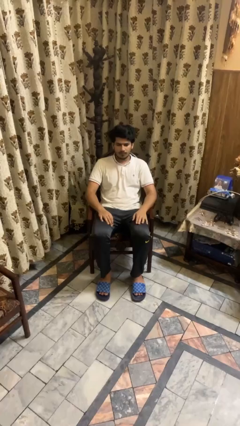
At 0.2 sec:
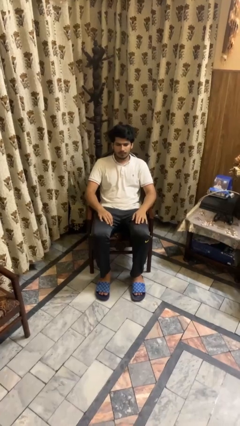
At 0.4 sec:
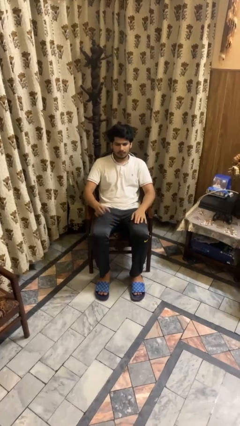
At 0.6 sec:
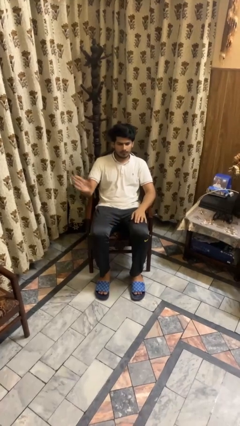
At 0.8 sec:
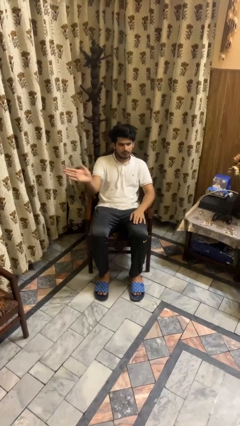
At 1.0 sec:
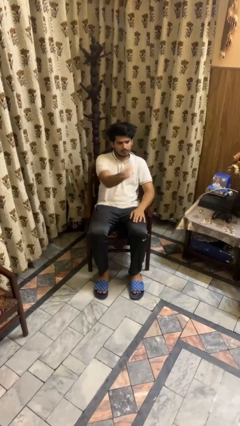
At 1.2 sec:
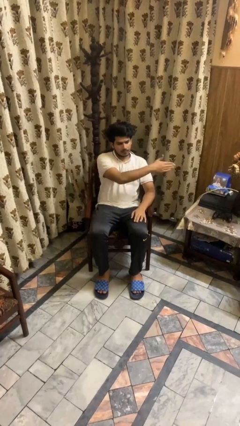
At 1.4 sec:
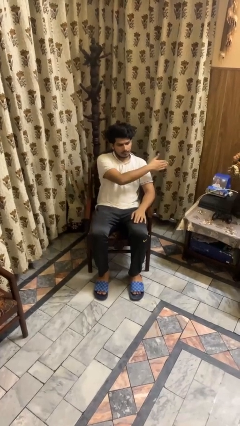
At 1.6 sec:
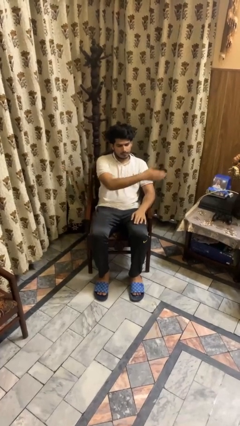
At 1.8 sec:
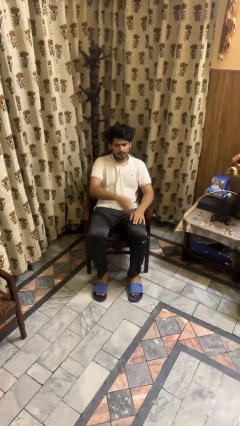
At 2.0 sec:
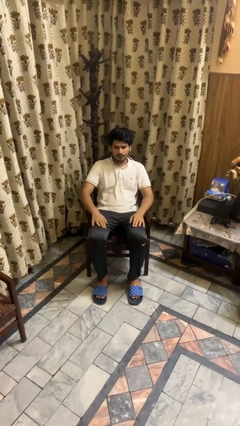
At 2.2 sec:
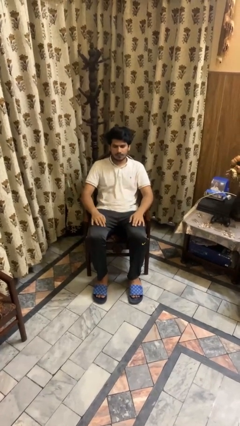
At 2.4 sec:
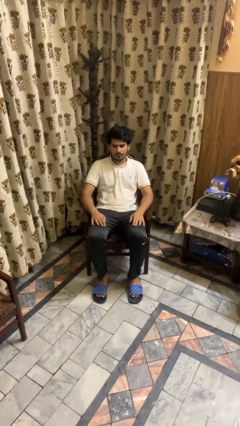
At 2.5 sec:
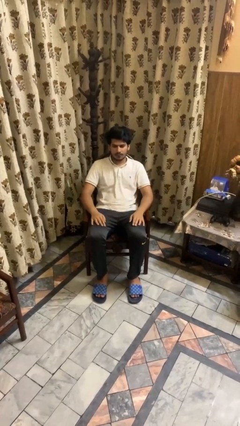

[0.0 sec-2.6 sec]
person gestures swipe left

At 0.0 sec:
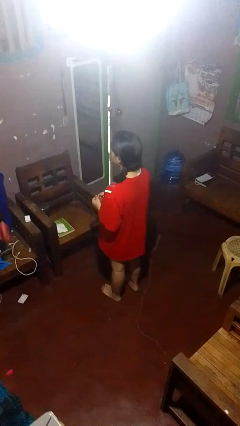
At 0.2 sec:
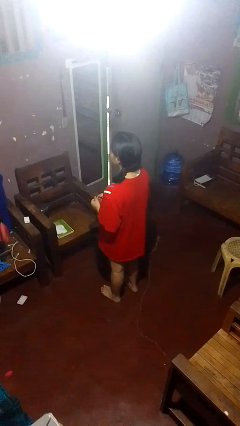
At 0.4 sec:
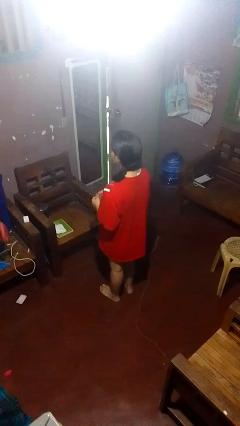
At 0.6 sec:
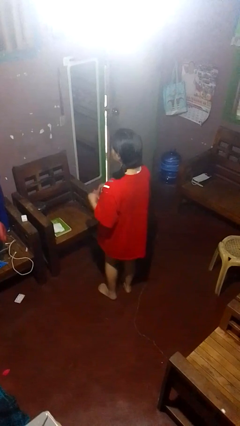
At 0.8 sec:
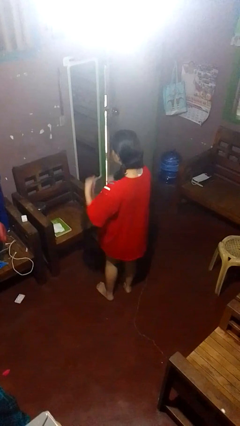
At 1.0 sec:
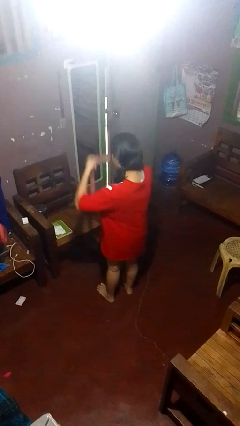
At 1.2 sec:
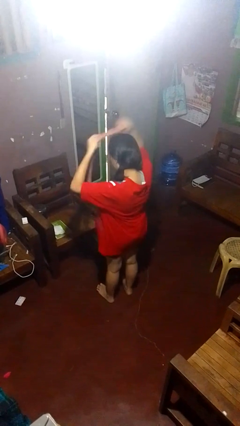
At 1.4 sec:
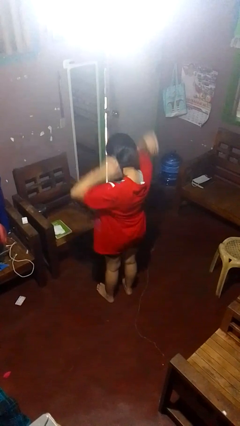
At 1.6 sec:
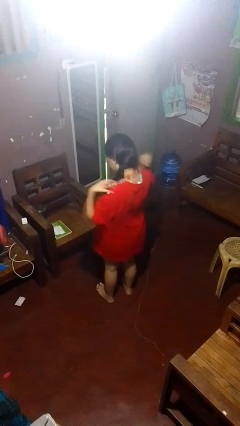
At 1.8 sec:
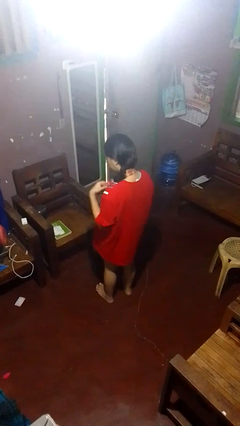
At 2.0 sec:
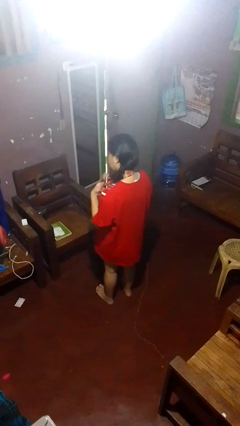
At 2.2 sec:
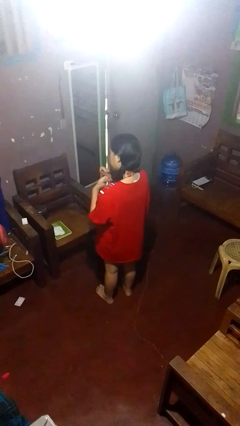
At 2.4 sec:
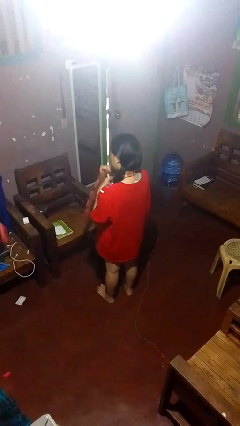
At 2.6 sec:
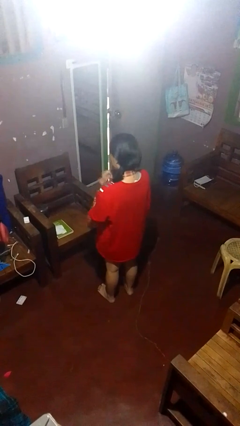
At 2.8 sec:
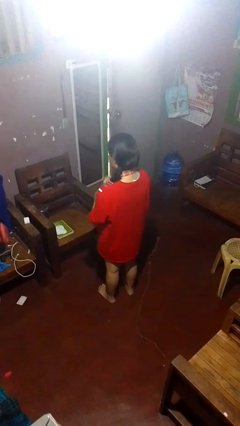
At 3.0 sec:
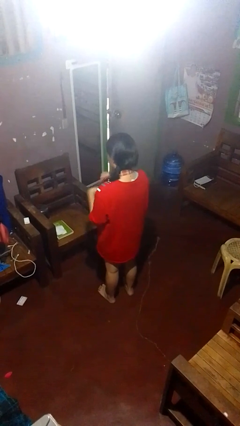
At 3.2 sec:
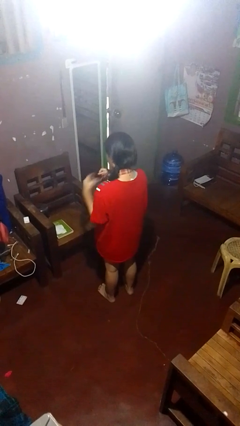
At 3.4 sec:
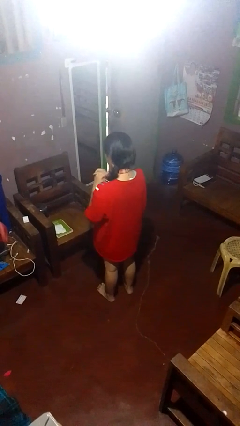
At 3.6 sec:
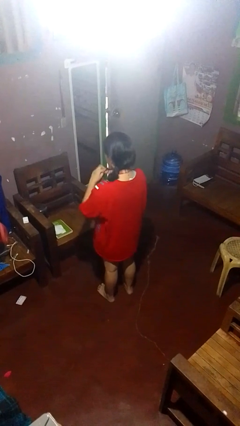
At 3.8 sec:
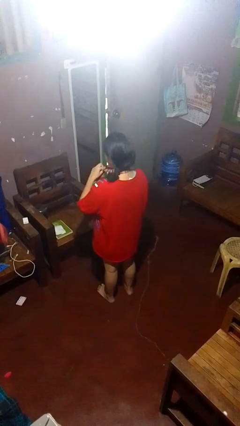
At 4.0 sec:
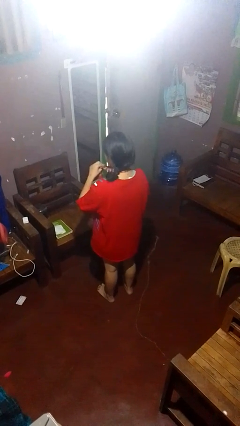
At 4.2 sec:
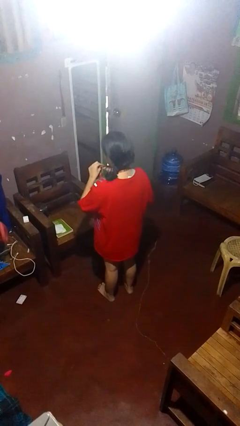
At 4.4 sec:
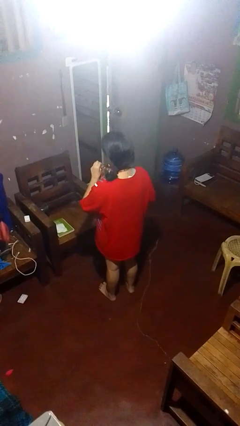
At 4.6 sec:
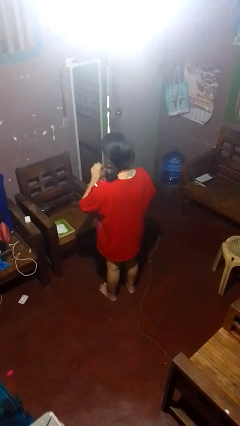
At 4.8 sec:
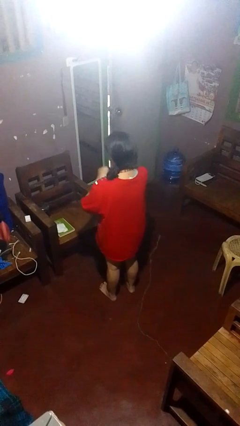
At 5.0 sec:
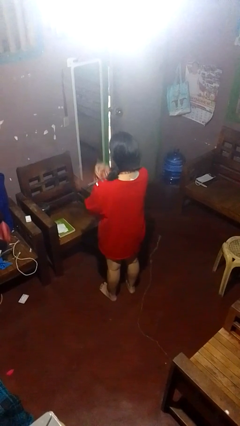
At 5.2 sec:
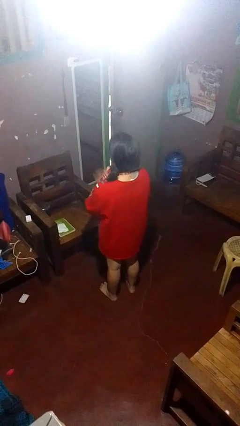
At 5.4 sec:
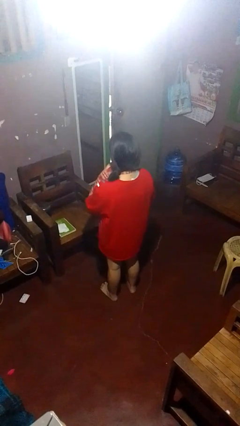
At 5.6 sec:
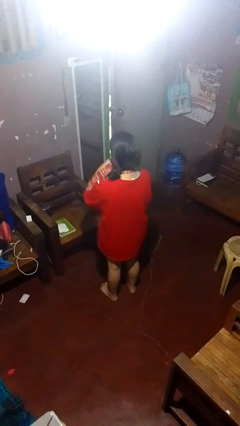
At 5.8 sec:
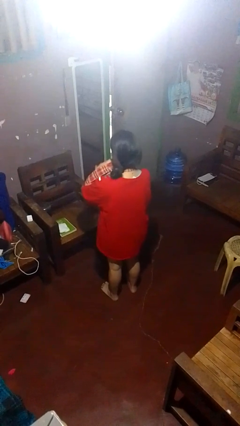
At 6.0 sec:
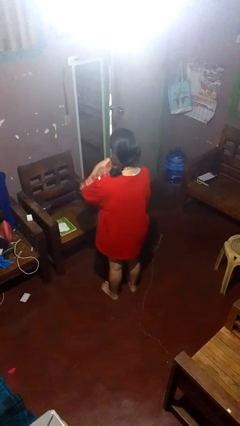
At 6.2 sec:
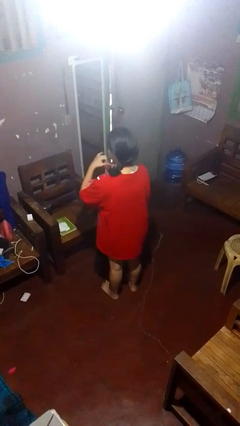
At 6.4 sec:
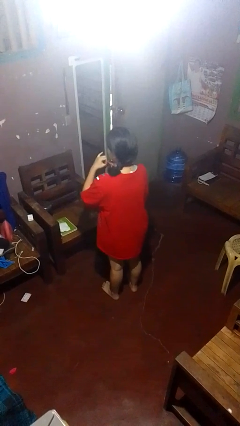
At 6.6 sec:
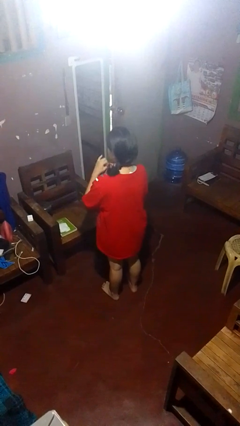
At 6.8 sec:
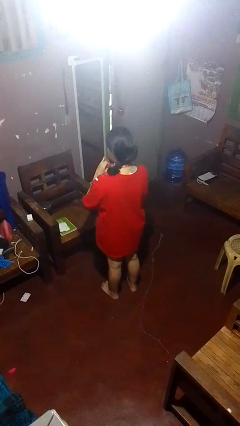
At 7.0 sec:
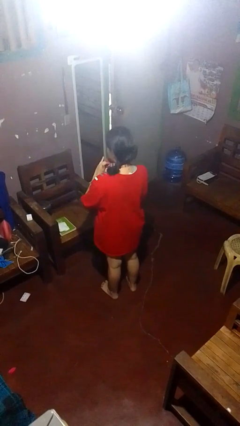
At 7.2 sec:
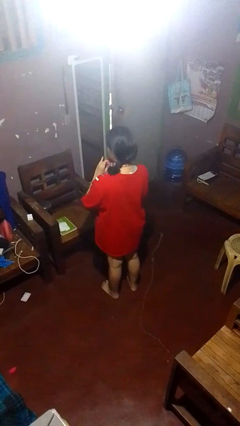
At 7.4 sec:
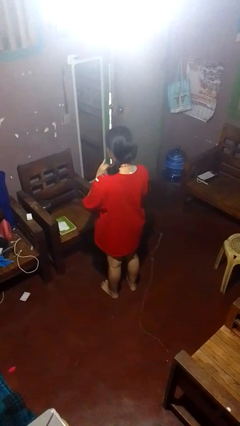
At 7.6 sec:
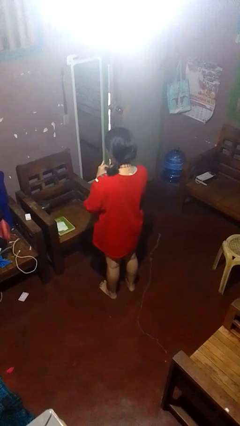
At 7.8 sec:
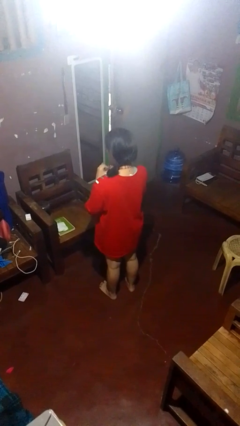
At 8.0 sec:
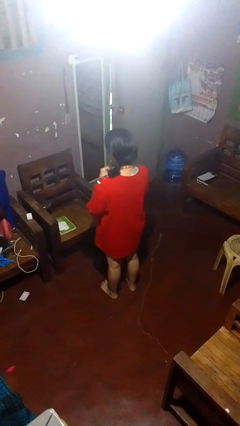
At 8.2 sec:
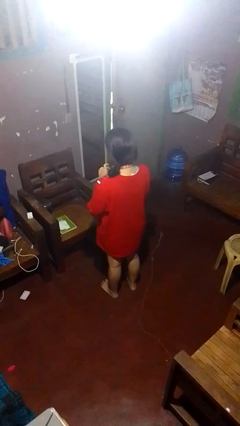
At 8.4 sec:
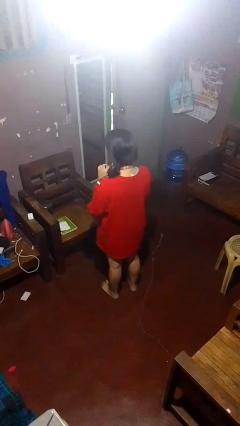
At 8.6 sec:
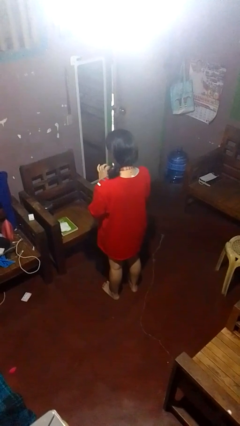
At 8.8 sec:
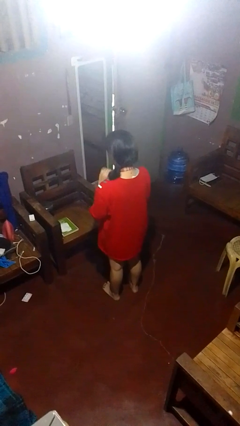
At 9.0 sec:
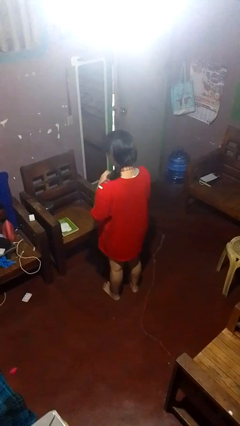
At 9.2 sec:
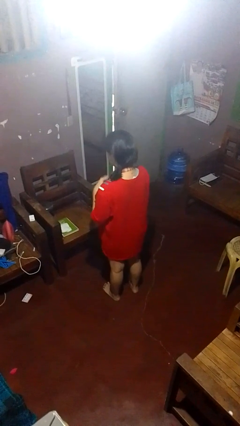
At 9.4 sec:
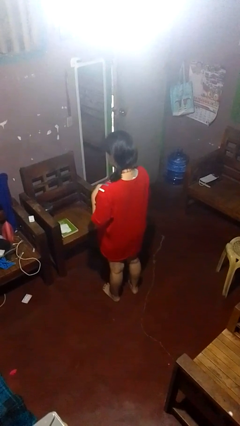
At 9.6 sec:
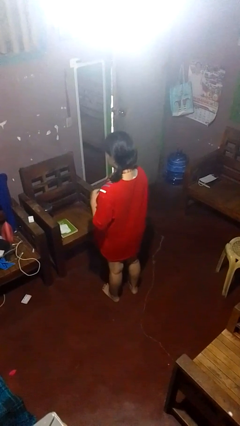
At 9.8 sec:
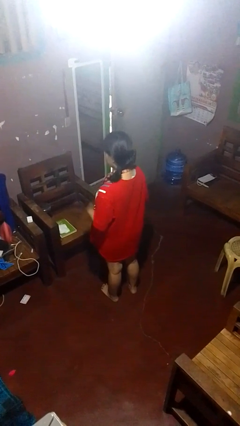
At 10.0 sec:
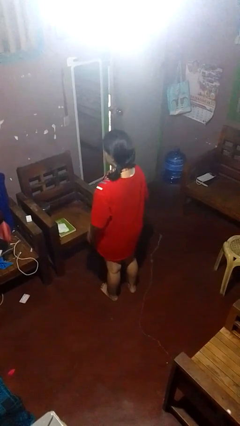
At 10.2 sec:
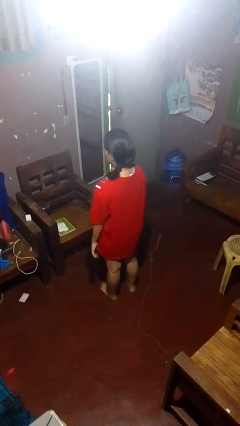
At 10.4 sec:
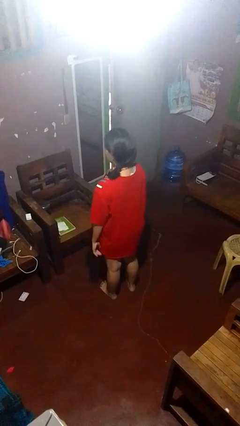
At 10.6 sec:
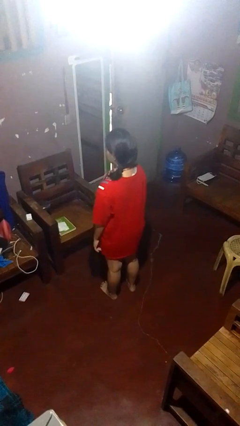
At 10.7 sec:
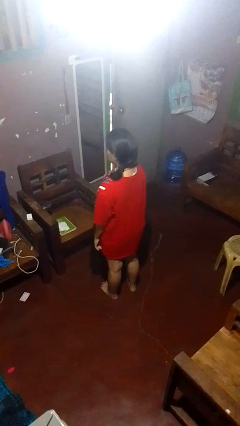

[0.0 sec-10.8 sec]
person puts on necktie

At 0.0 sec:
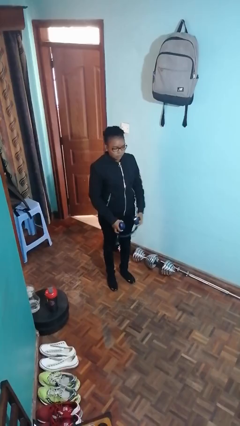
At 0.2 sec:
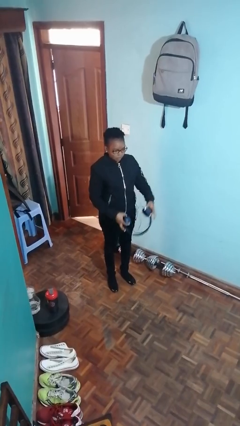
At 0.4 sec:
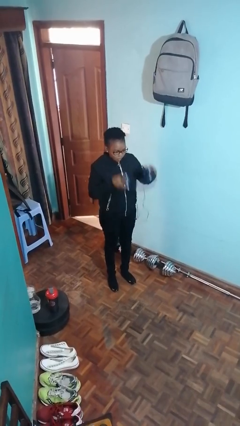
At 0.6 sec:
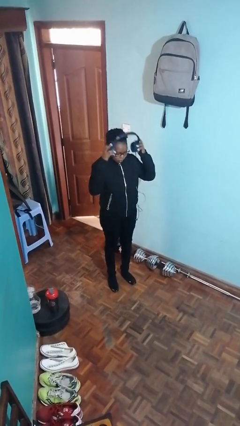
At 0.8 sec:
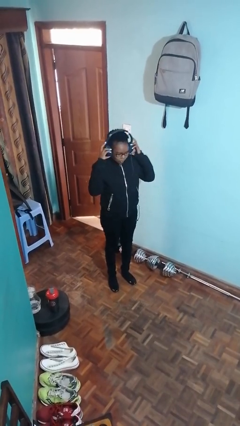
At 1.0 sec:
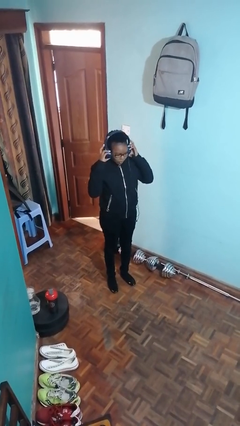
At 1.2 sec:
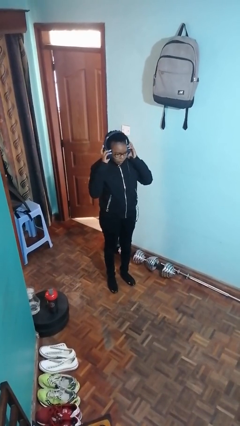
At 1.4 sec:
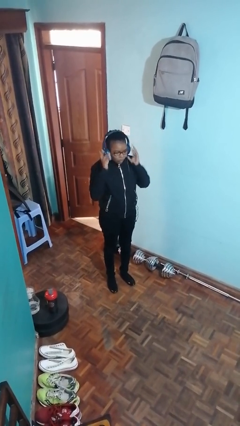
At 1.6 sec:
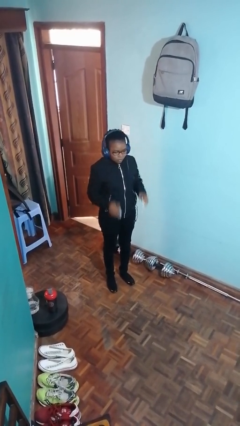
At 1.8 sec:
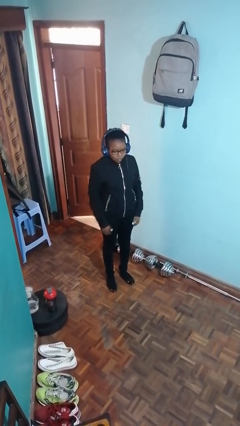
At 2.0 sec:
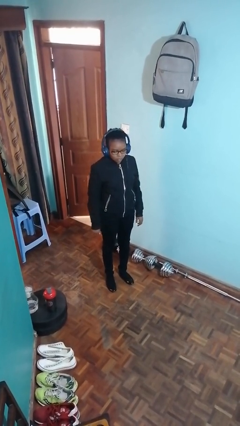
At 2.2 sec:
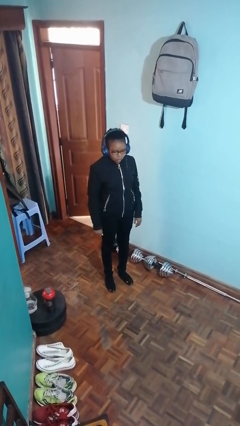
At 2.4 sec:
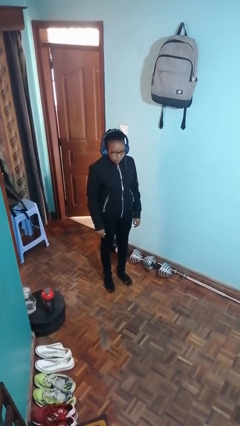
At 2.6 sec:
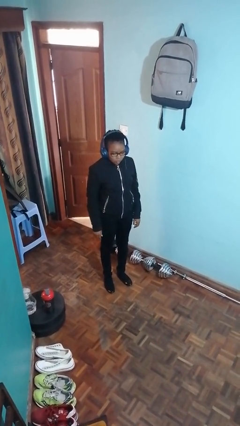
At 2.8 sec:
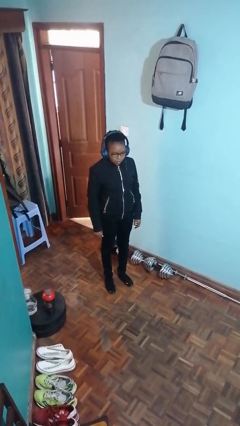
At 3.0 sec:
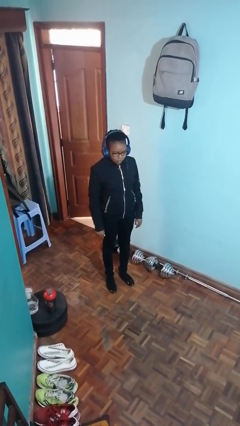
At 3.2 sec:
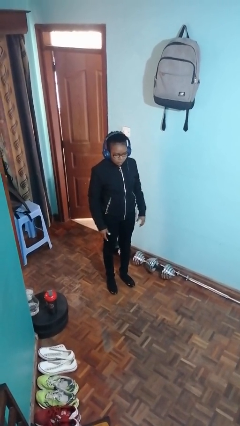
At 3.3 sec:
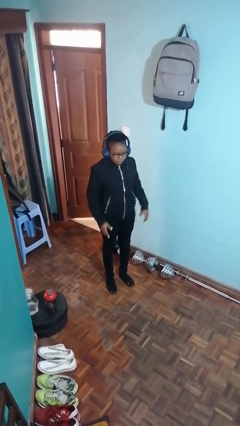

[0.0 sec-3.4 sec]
person puts on headphones

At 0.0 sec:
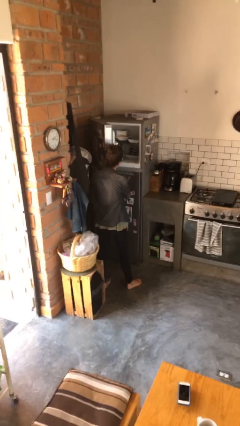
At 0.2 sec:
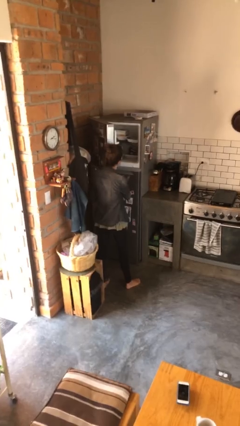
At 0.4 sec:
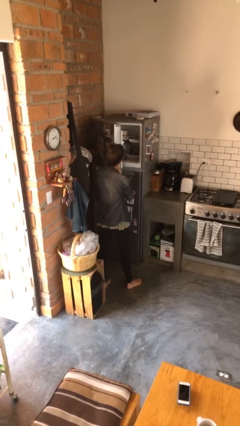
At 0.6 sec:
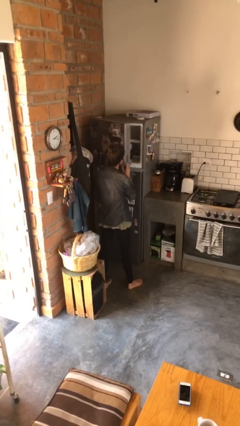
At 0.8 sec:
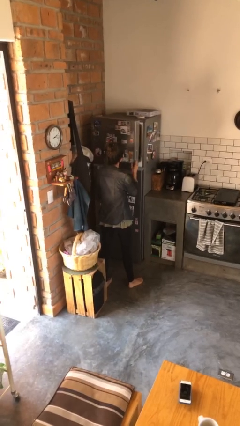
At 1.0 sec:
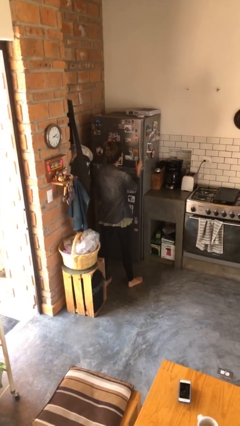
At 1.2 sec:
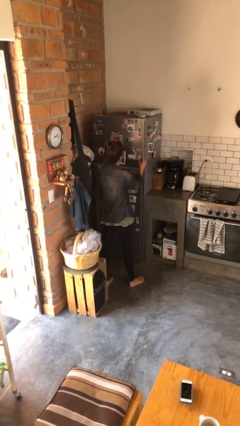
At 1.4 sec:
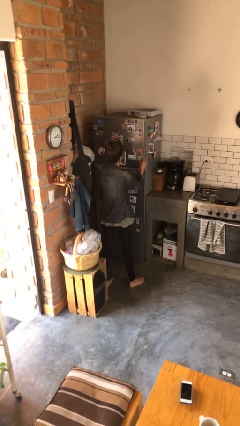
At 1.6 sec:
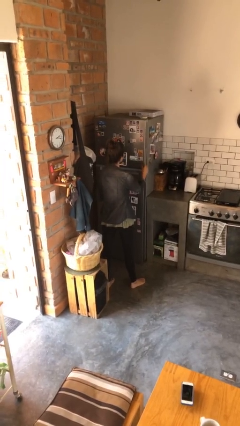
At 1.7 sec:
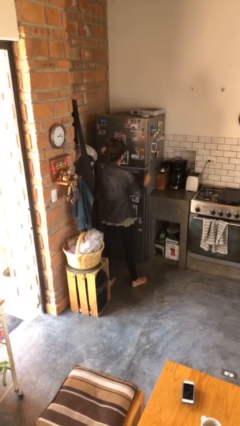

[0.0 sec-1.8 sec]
person closes refrigerator
